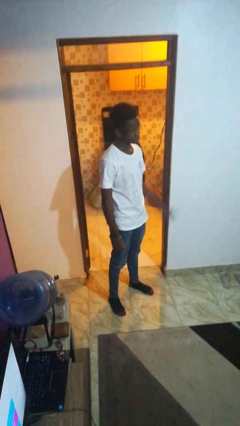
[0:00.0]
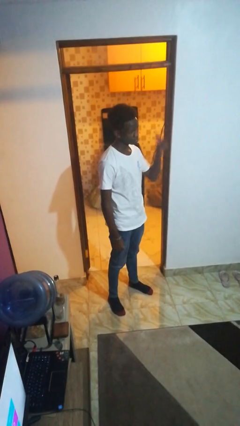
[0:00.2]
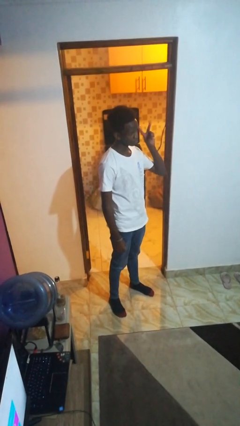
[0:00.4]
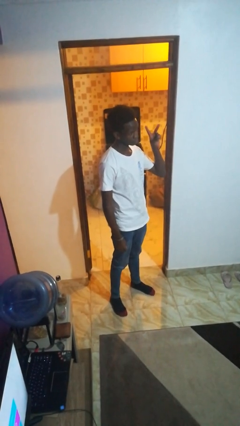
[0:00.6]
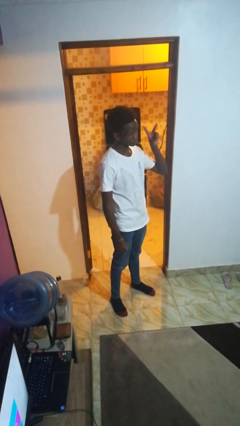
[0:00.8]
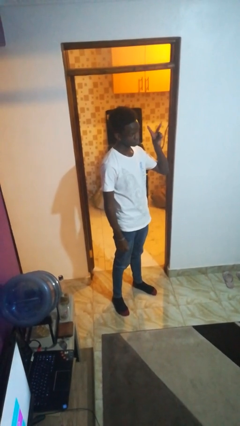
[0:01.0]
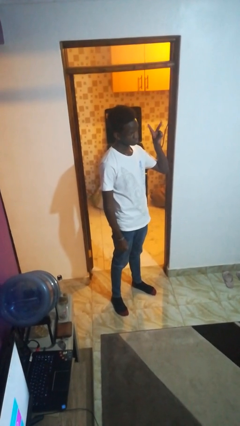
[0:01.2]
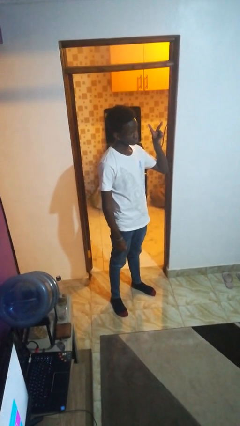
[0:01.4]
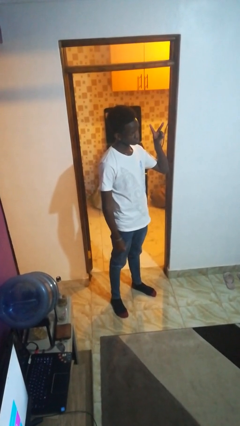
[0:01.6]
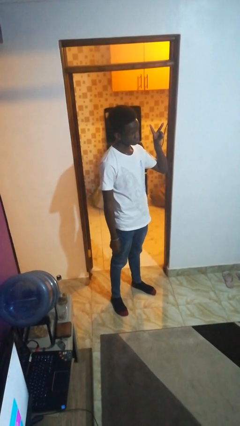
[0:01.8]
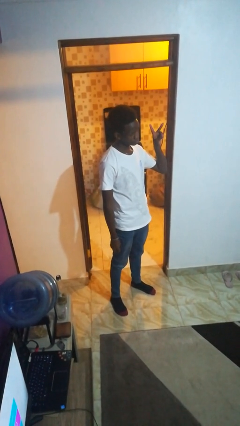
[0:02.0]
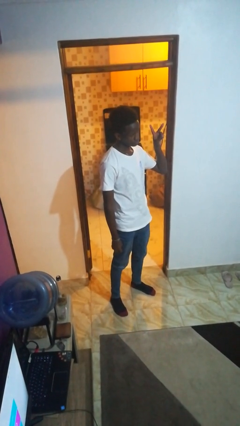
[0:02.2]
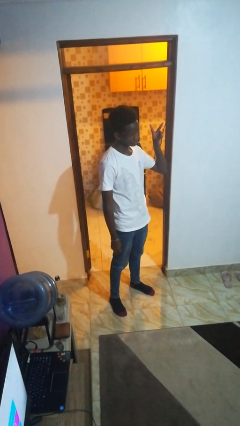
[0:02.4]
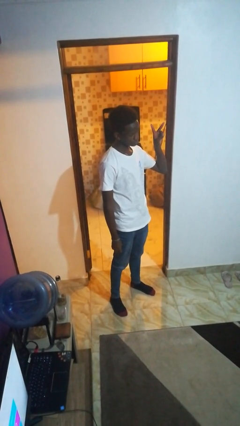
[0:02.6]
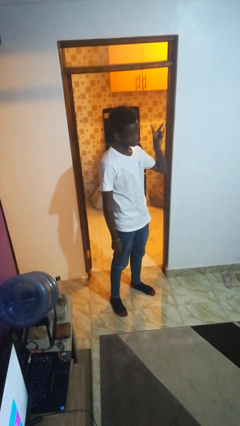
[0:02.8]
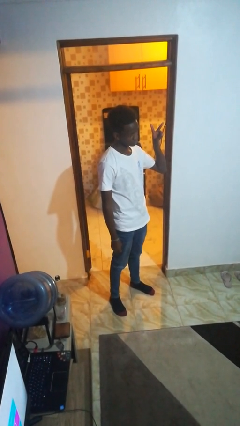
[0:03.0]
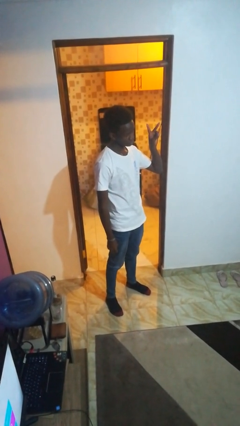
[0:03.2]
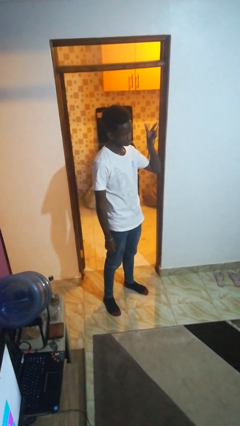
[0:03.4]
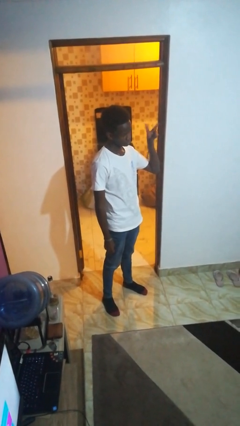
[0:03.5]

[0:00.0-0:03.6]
person gestures peace

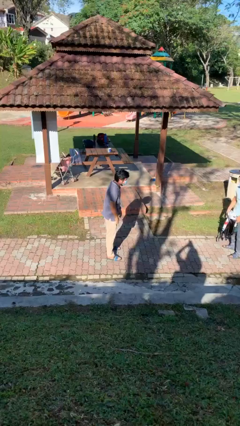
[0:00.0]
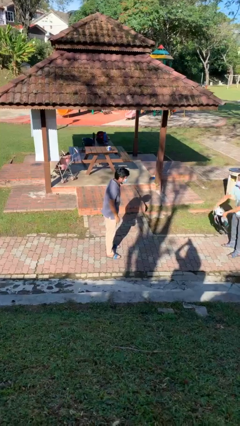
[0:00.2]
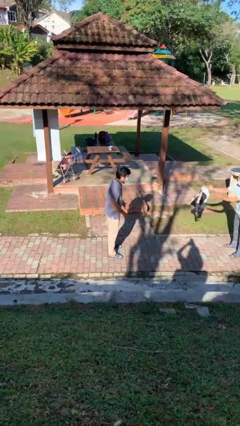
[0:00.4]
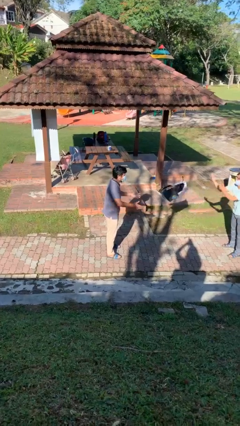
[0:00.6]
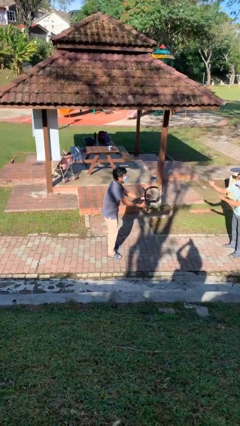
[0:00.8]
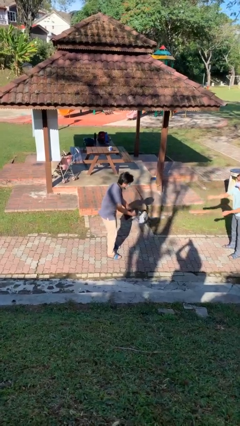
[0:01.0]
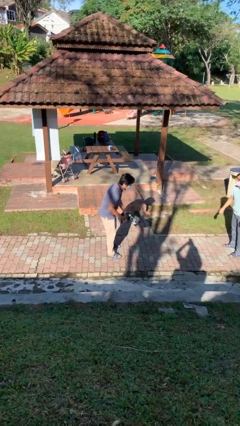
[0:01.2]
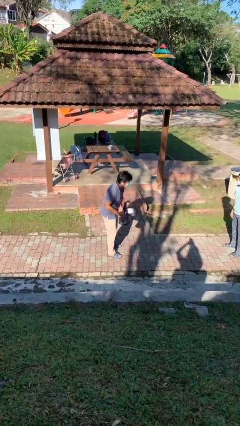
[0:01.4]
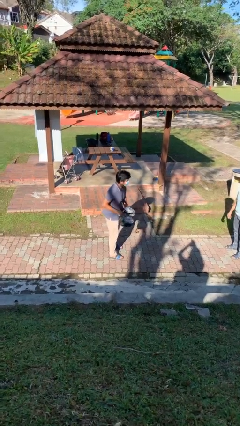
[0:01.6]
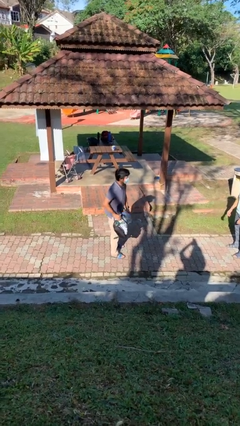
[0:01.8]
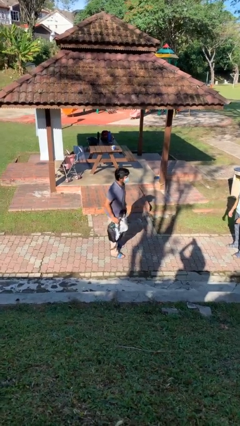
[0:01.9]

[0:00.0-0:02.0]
person catches object from person

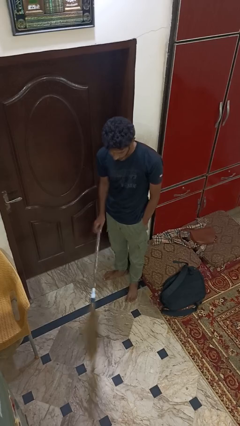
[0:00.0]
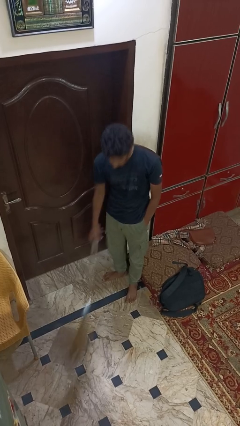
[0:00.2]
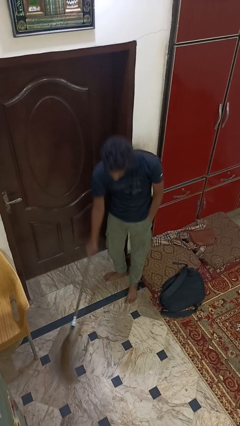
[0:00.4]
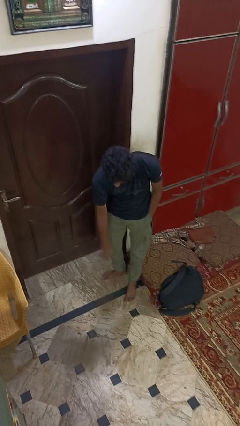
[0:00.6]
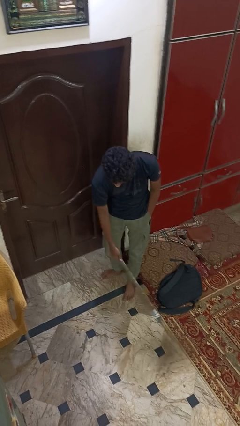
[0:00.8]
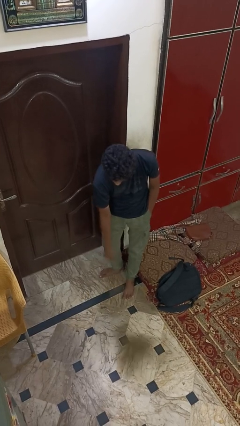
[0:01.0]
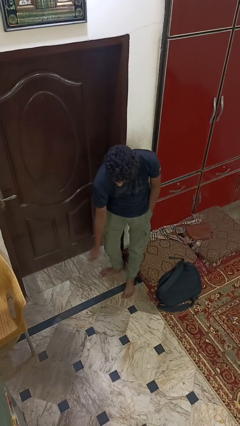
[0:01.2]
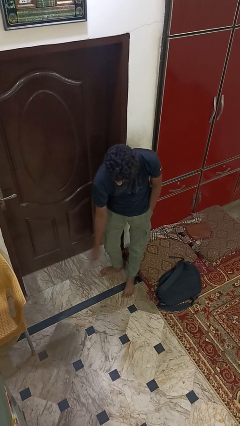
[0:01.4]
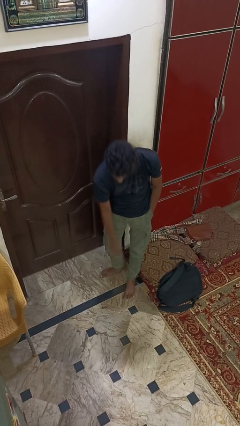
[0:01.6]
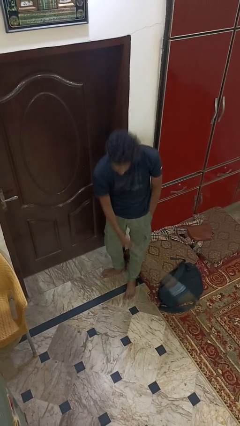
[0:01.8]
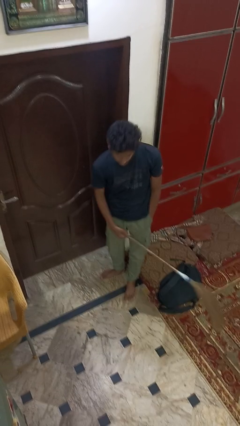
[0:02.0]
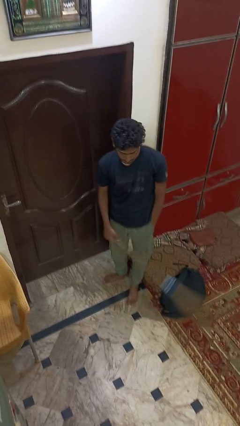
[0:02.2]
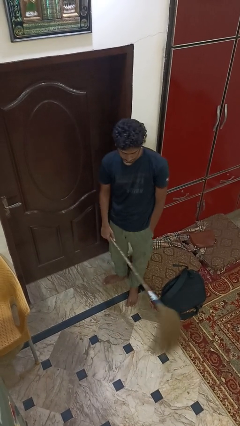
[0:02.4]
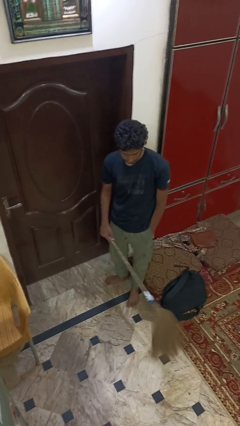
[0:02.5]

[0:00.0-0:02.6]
person sweeps floor

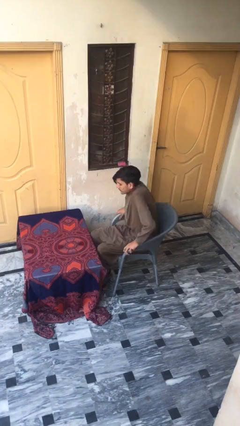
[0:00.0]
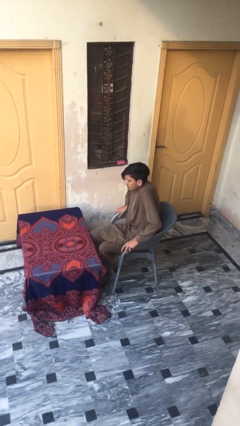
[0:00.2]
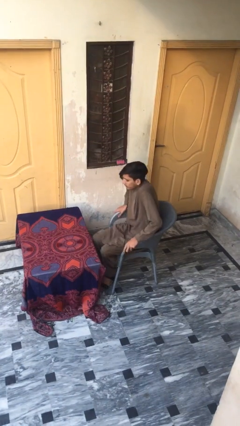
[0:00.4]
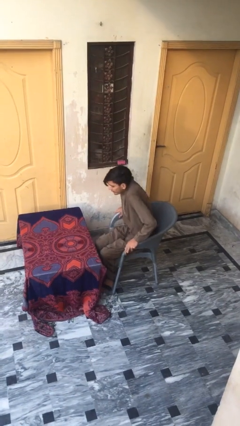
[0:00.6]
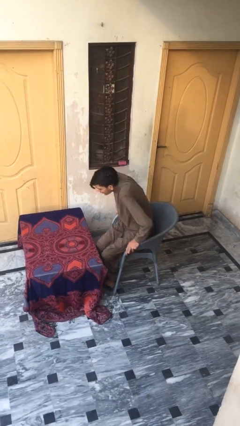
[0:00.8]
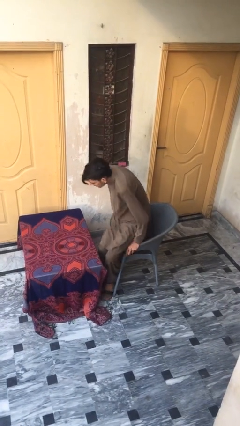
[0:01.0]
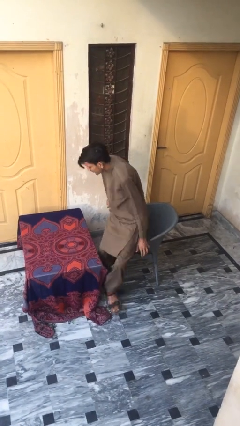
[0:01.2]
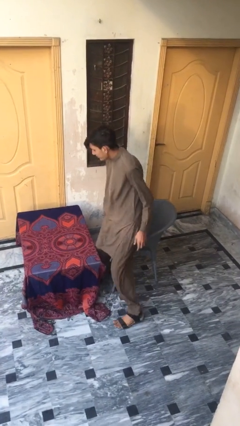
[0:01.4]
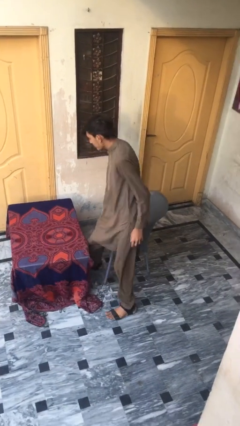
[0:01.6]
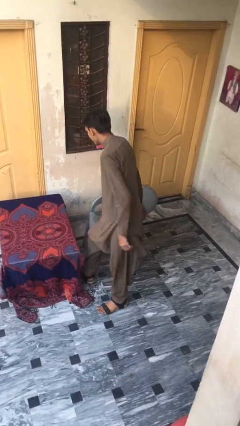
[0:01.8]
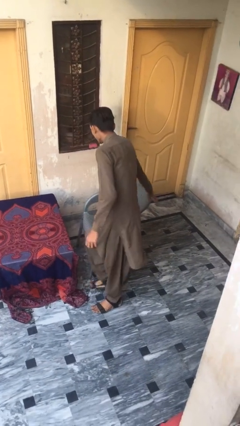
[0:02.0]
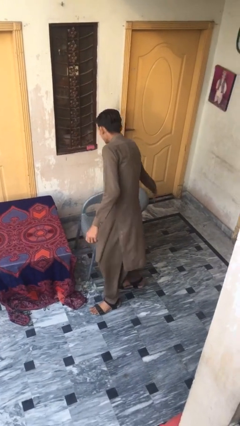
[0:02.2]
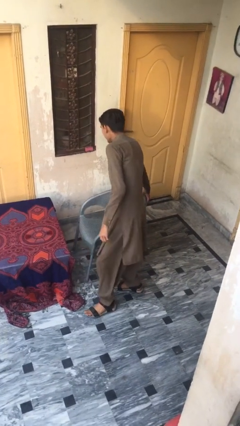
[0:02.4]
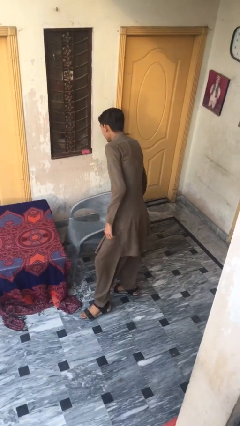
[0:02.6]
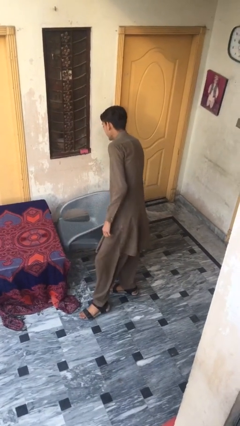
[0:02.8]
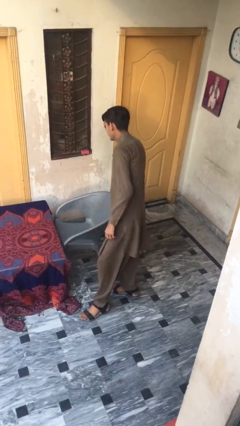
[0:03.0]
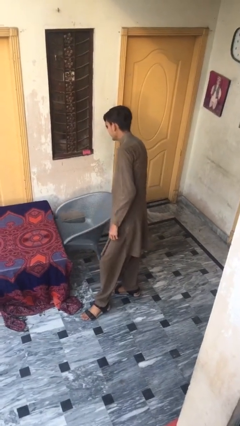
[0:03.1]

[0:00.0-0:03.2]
person stands up

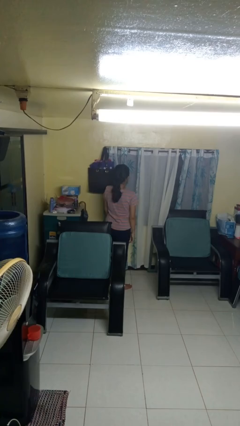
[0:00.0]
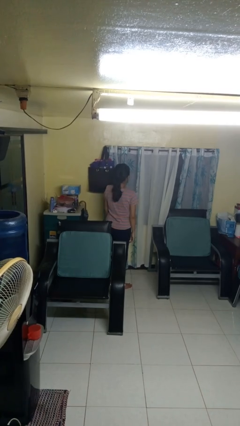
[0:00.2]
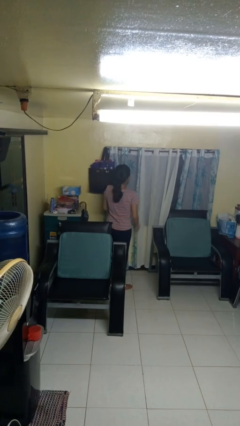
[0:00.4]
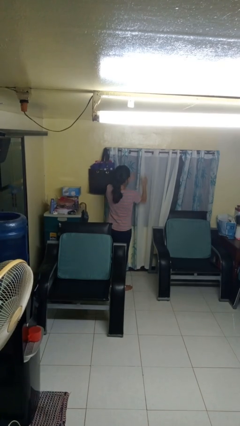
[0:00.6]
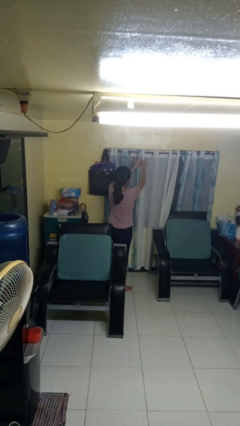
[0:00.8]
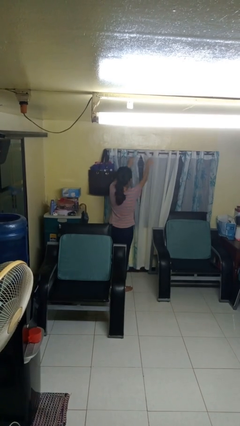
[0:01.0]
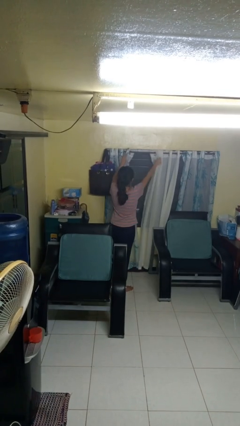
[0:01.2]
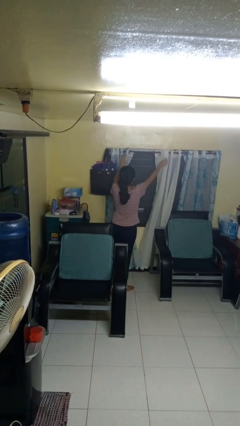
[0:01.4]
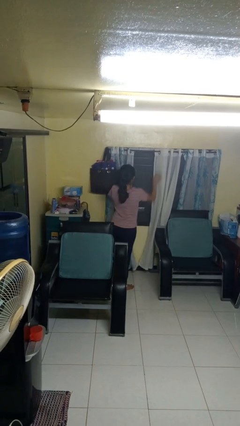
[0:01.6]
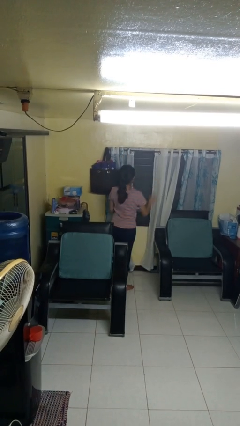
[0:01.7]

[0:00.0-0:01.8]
person opens curtains

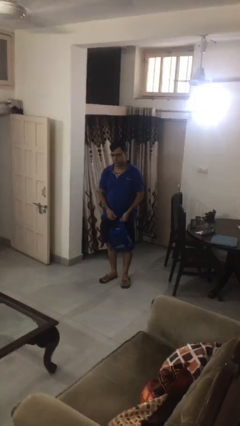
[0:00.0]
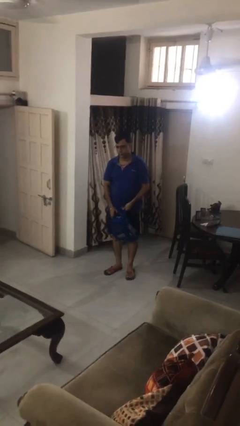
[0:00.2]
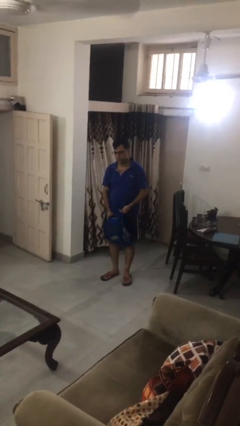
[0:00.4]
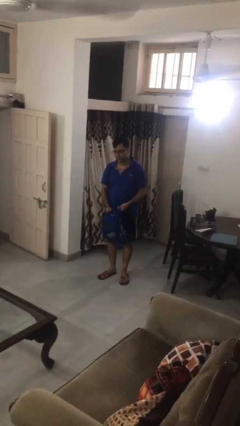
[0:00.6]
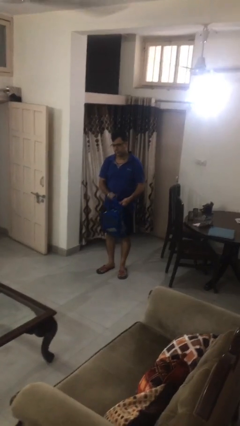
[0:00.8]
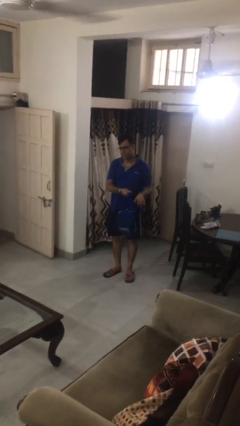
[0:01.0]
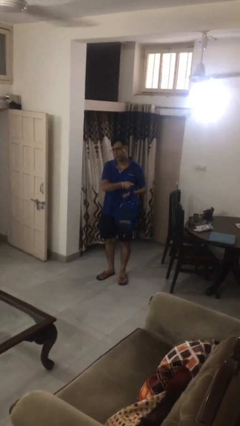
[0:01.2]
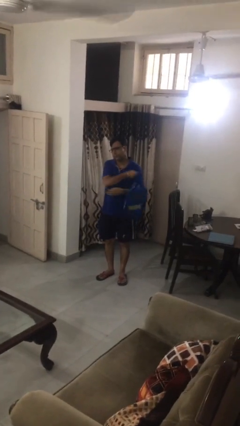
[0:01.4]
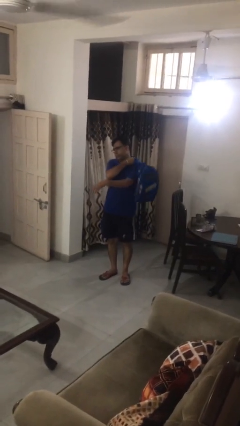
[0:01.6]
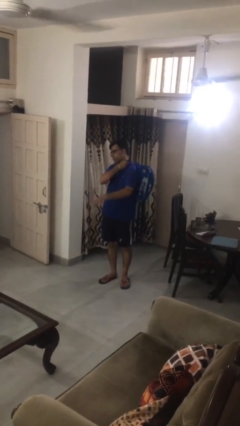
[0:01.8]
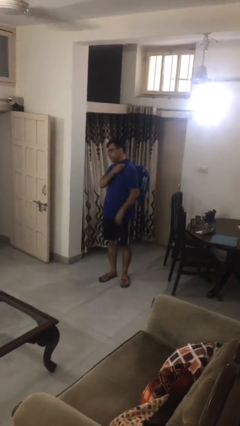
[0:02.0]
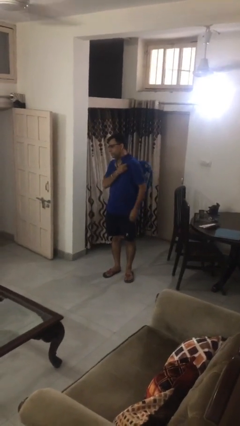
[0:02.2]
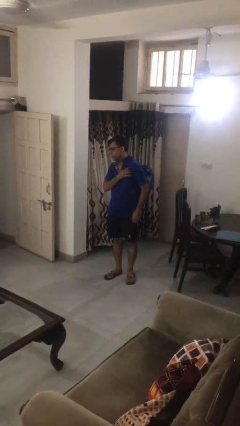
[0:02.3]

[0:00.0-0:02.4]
person puts on backpack

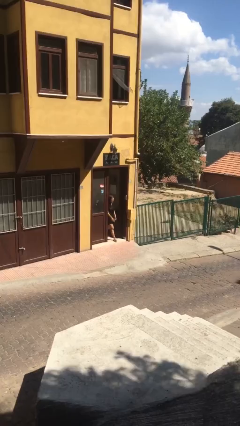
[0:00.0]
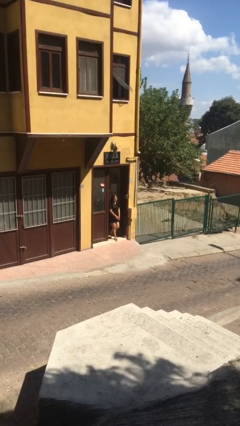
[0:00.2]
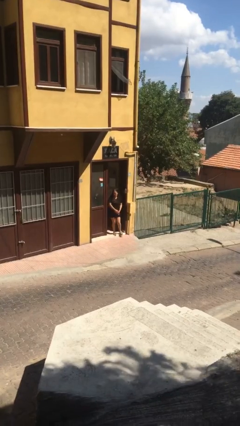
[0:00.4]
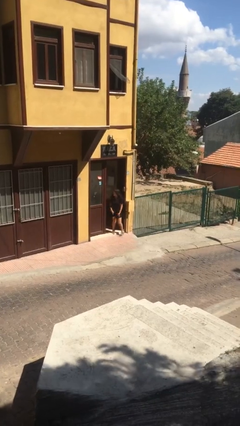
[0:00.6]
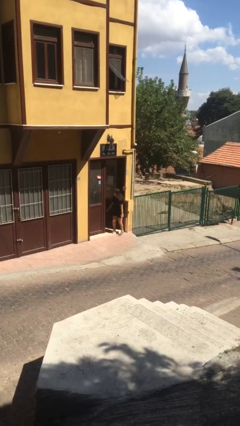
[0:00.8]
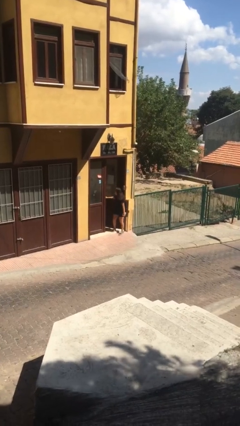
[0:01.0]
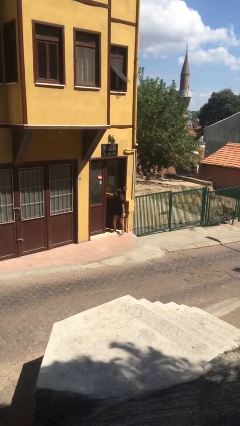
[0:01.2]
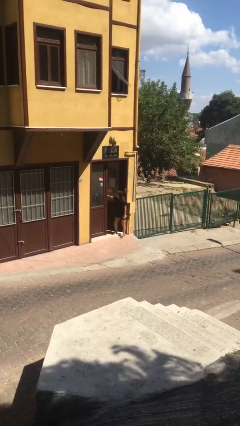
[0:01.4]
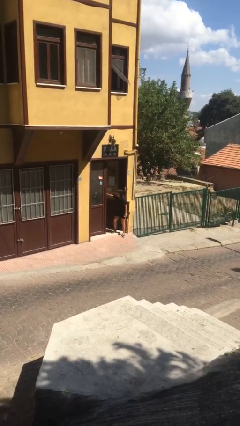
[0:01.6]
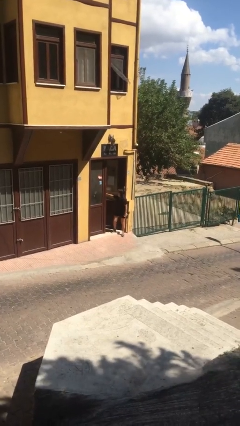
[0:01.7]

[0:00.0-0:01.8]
person enters scene through structure
